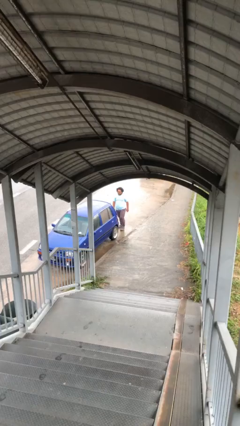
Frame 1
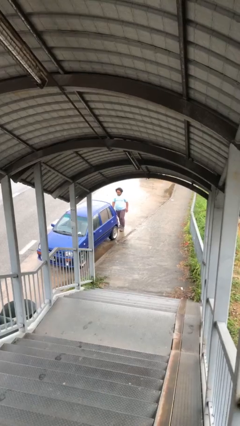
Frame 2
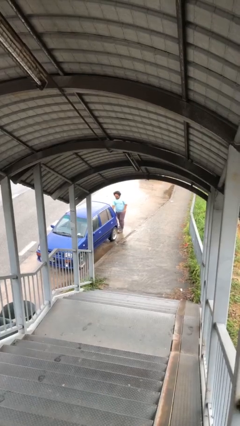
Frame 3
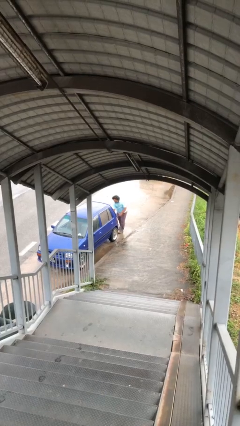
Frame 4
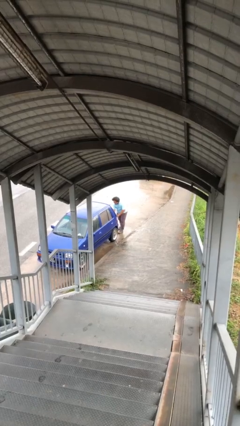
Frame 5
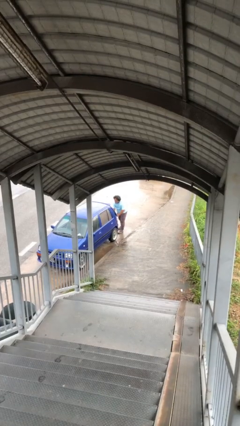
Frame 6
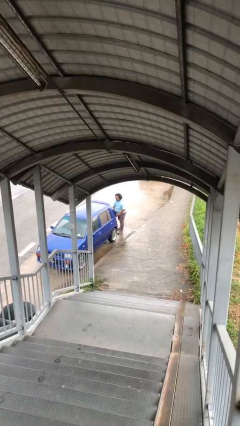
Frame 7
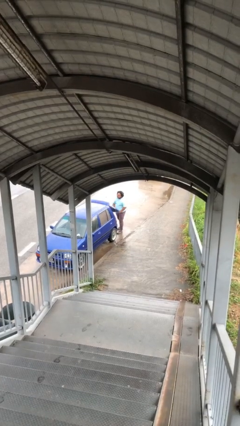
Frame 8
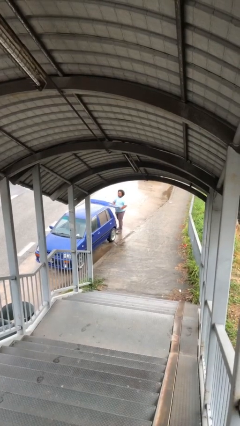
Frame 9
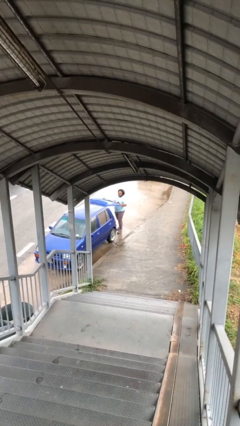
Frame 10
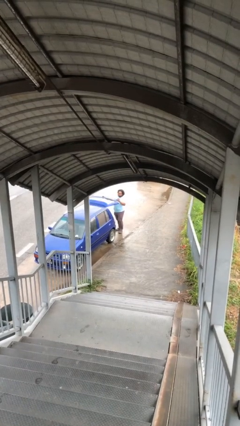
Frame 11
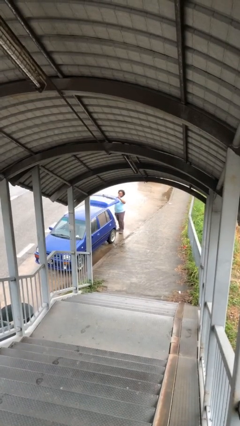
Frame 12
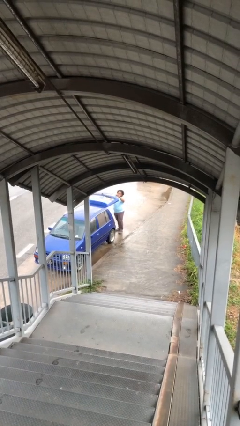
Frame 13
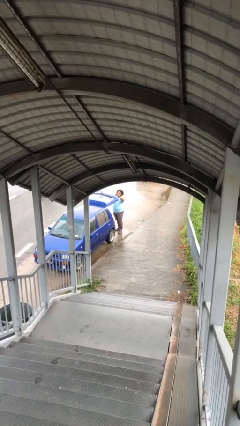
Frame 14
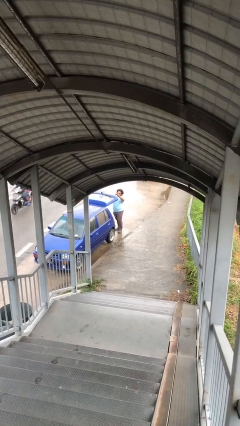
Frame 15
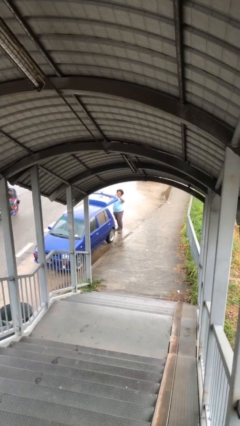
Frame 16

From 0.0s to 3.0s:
person opens car trunk

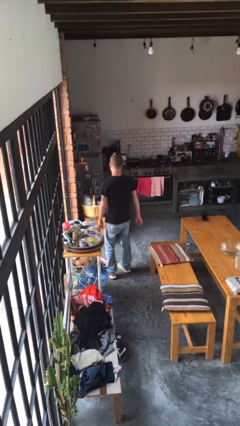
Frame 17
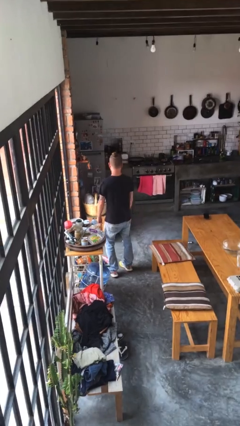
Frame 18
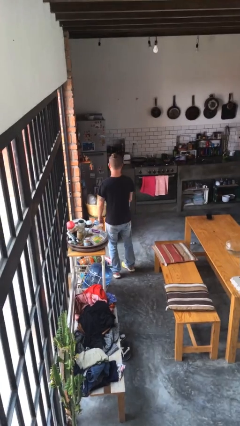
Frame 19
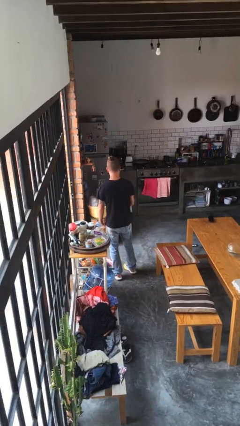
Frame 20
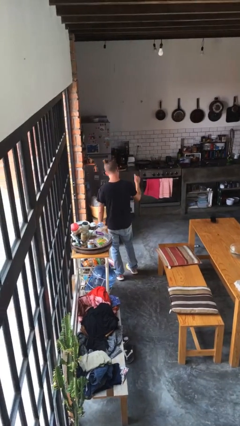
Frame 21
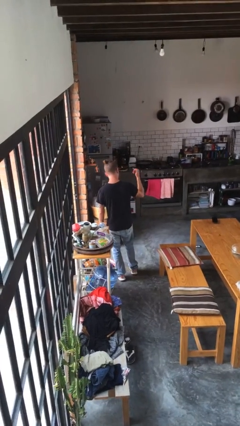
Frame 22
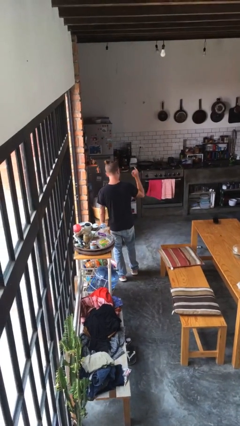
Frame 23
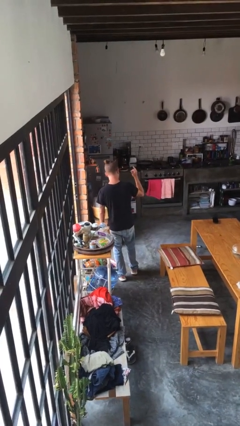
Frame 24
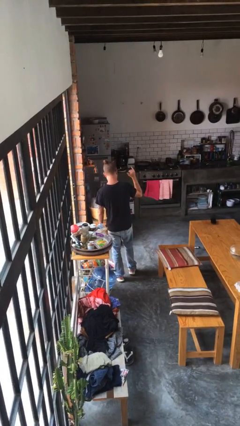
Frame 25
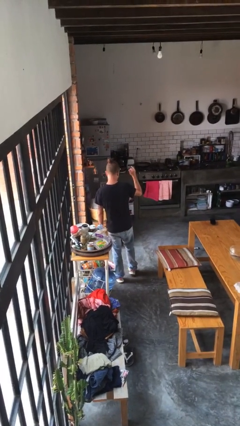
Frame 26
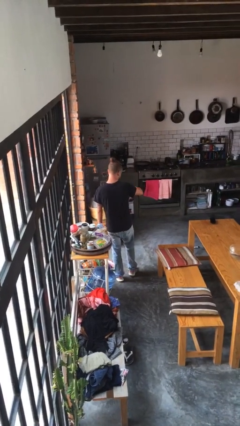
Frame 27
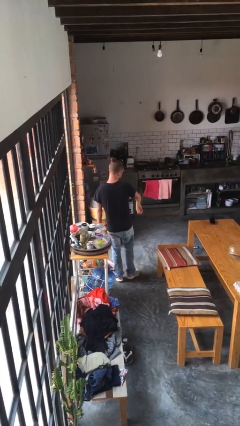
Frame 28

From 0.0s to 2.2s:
person gestures hang loose

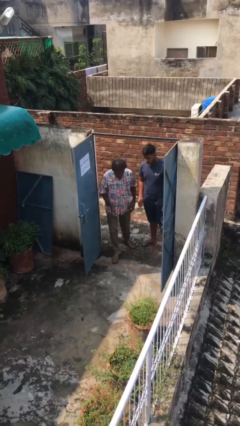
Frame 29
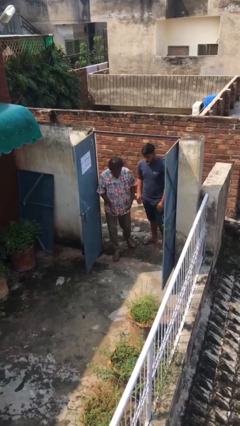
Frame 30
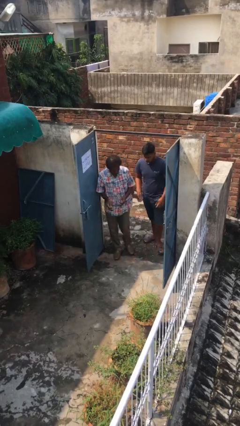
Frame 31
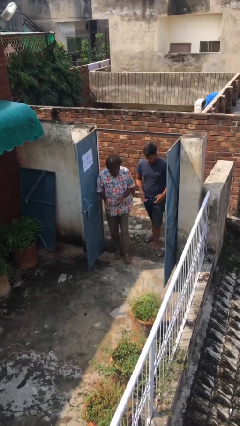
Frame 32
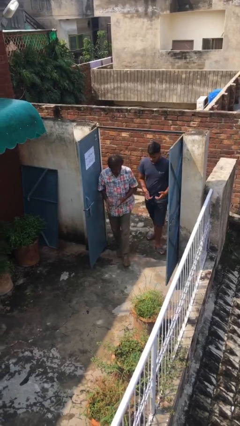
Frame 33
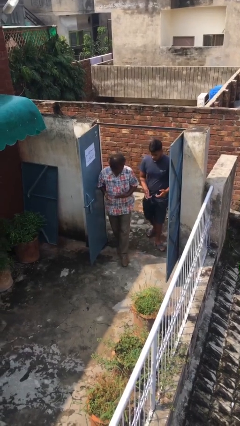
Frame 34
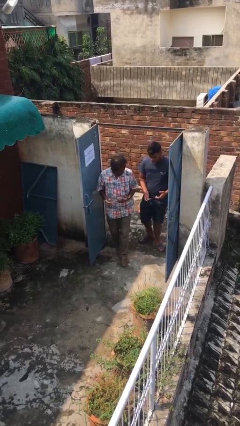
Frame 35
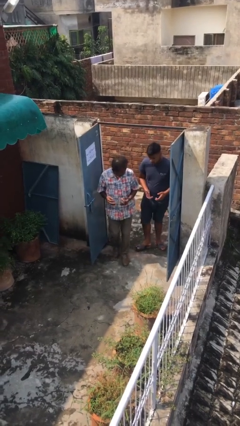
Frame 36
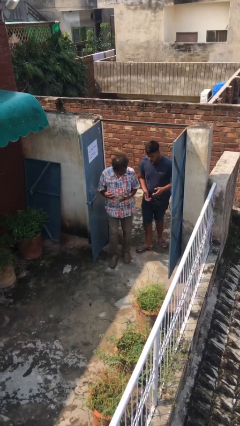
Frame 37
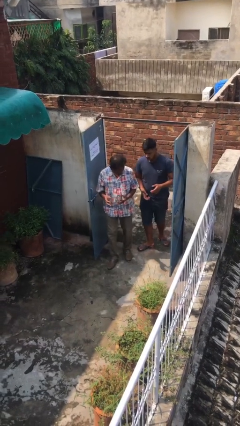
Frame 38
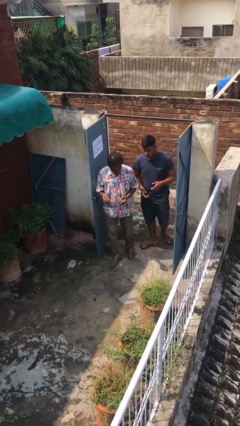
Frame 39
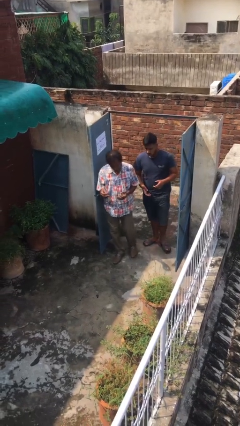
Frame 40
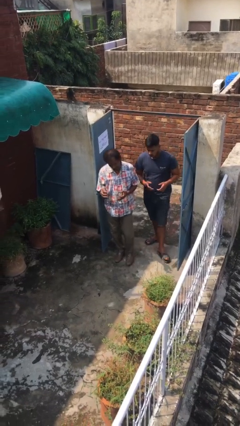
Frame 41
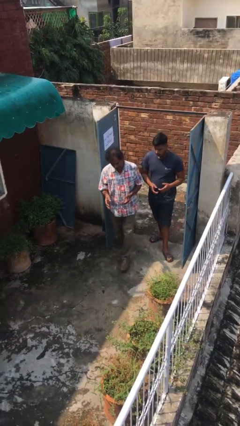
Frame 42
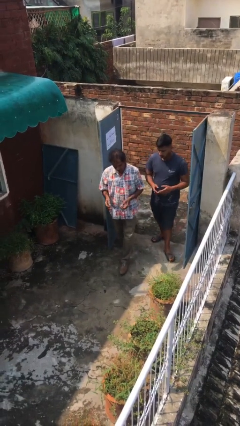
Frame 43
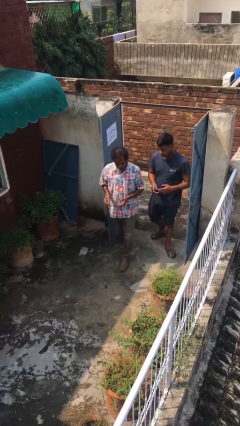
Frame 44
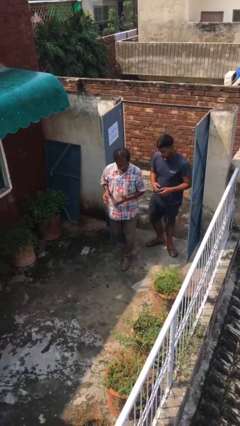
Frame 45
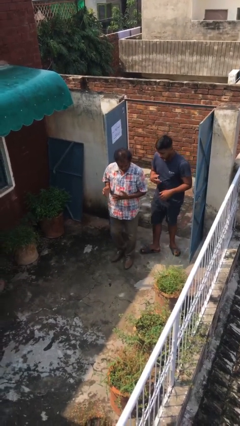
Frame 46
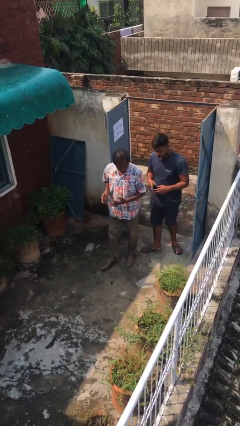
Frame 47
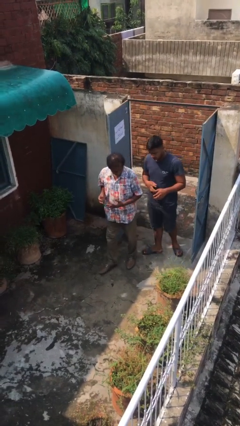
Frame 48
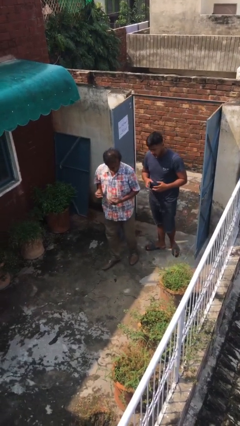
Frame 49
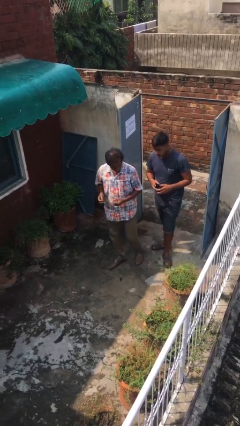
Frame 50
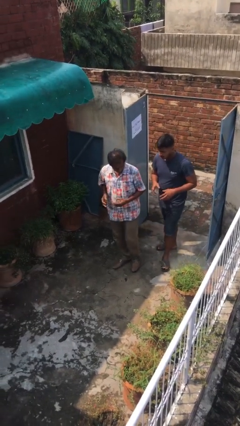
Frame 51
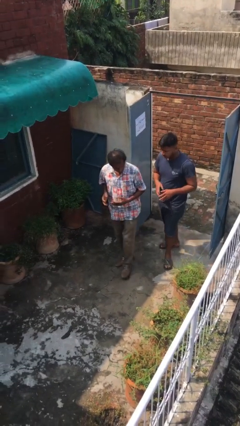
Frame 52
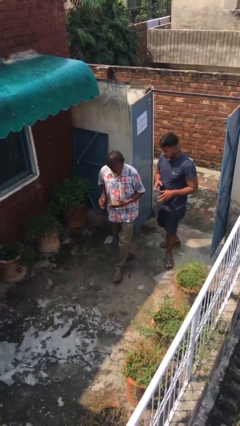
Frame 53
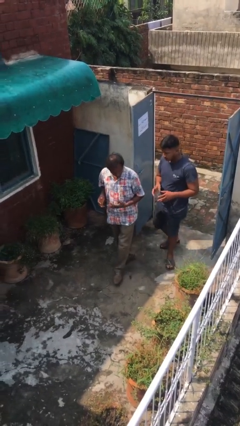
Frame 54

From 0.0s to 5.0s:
person talks to person

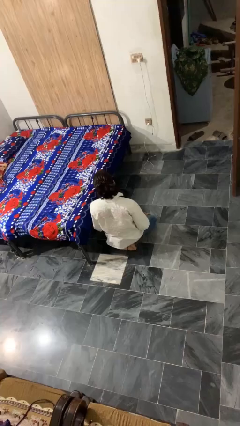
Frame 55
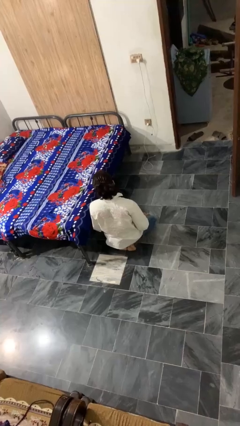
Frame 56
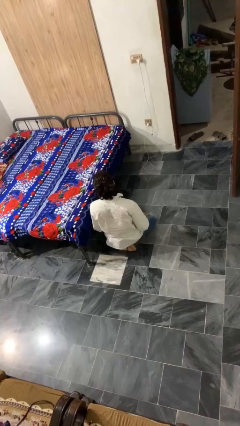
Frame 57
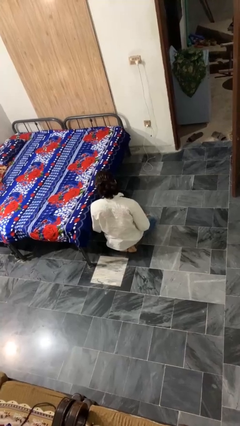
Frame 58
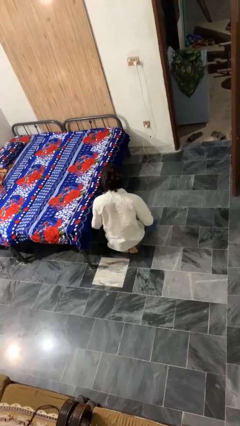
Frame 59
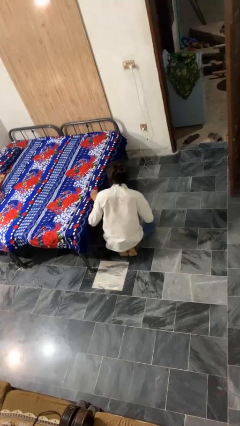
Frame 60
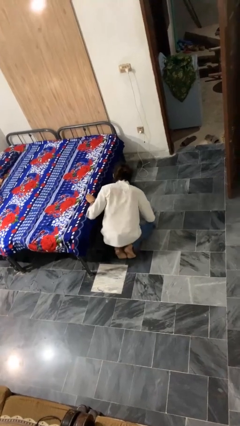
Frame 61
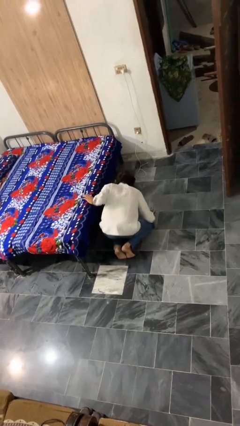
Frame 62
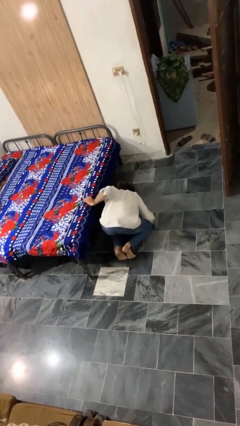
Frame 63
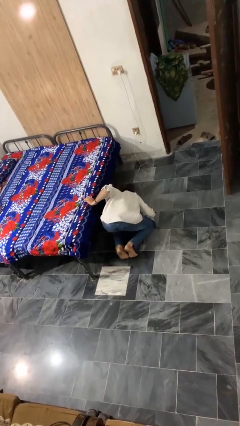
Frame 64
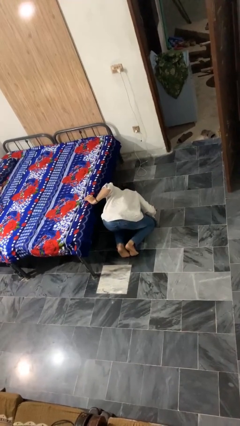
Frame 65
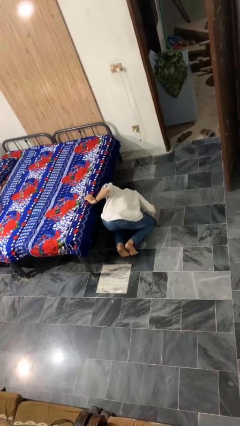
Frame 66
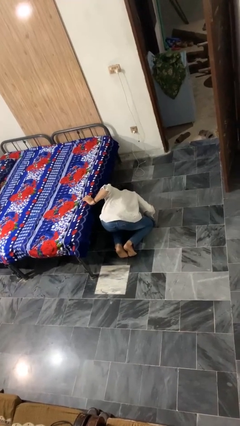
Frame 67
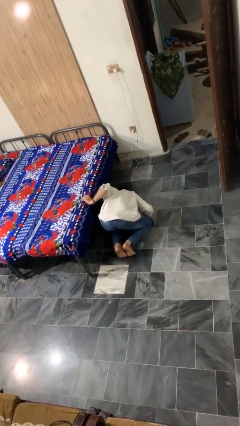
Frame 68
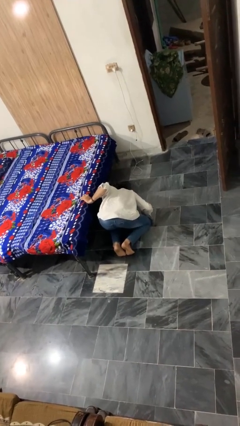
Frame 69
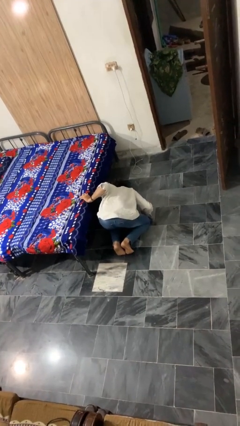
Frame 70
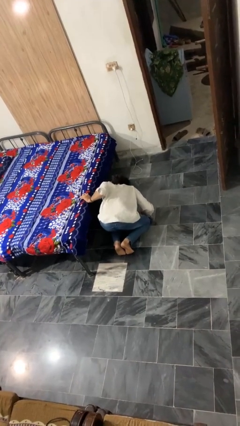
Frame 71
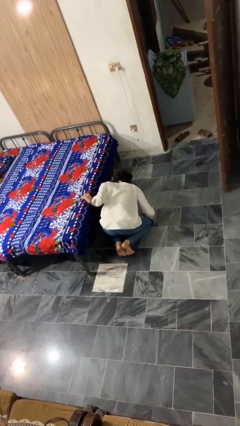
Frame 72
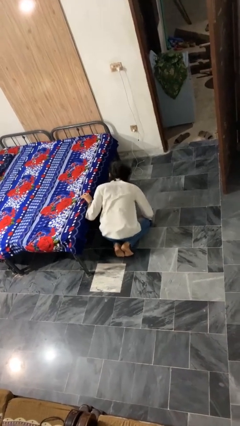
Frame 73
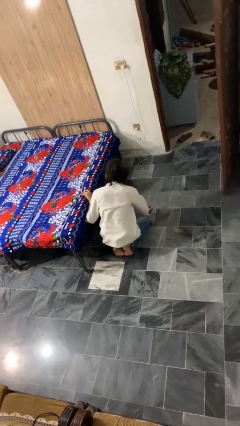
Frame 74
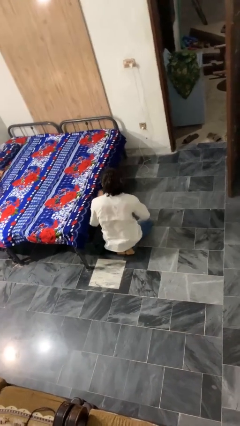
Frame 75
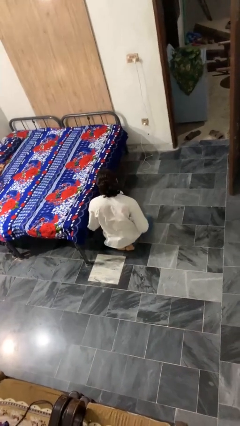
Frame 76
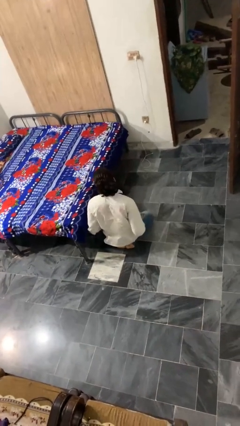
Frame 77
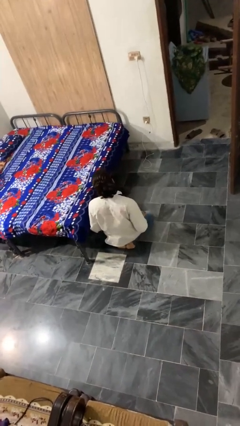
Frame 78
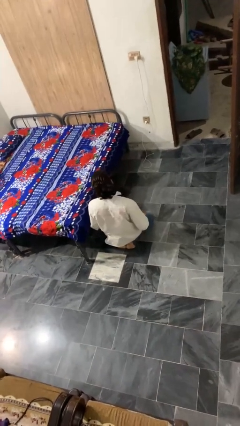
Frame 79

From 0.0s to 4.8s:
person searches under bed

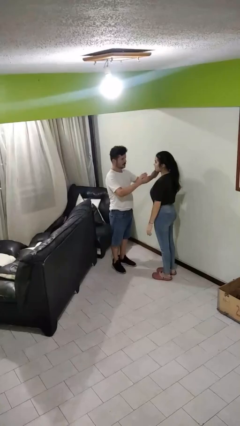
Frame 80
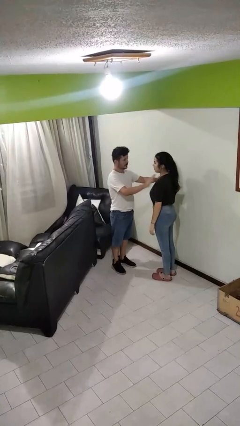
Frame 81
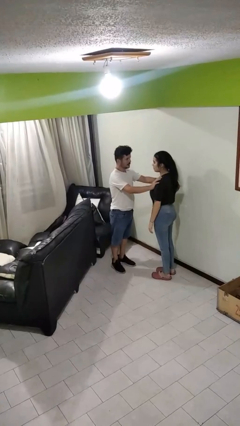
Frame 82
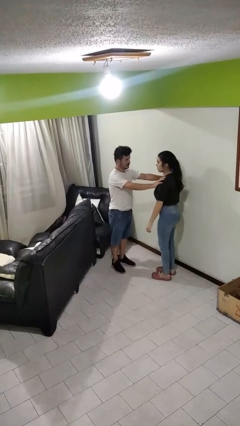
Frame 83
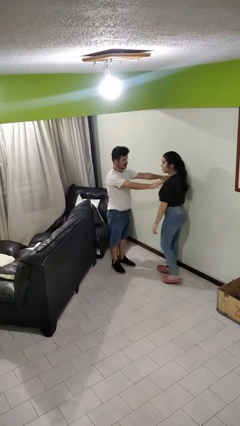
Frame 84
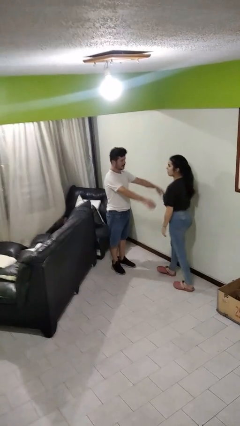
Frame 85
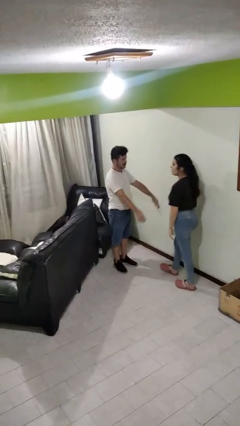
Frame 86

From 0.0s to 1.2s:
person shoves person

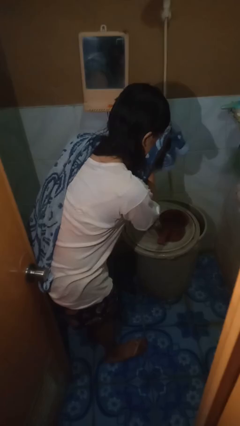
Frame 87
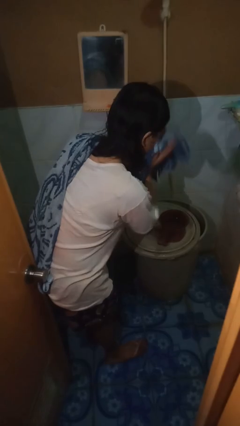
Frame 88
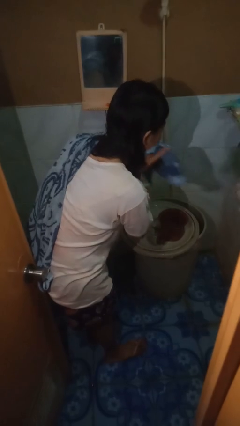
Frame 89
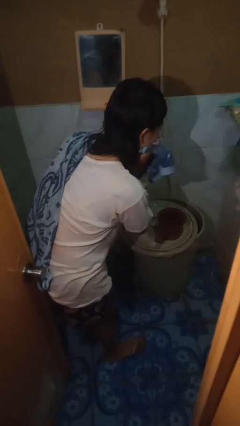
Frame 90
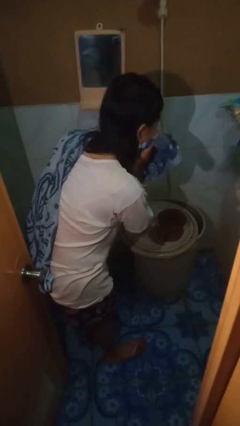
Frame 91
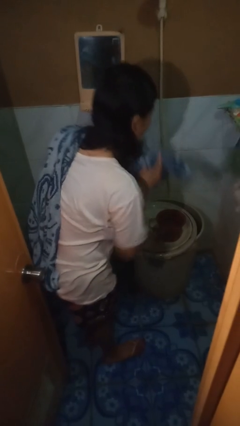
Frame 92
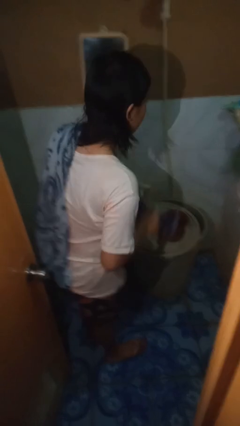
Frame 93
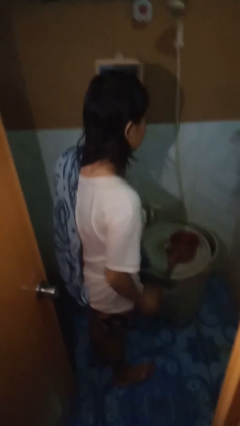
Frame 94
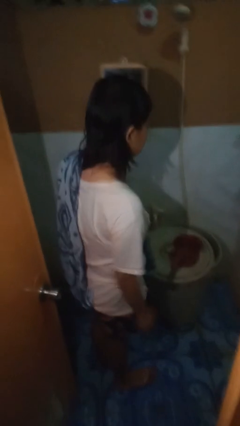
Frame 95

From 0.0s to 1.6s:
person dries face with towel
